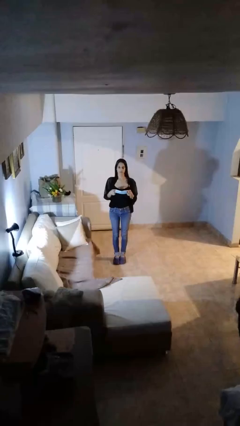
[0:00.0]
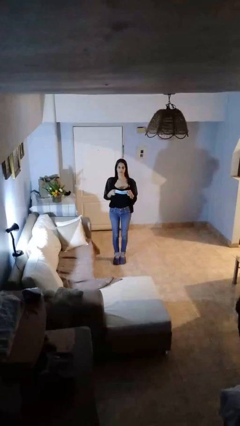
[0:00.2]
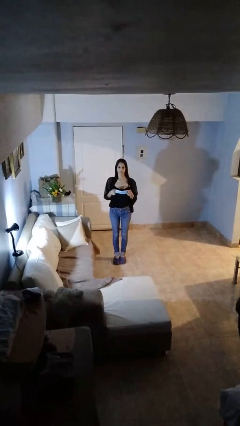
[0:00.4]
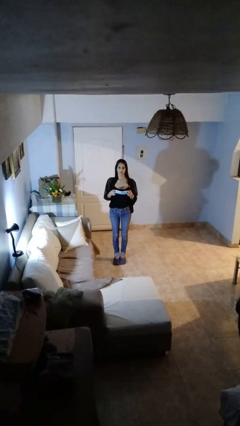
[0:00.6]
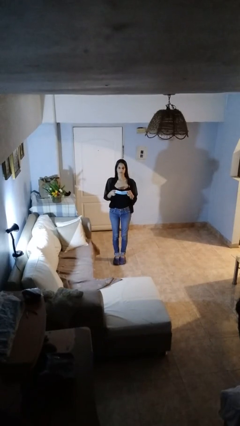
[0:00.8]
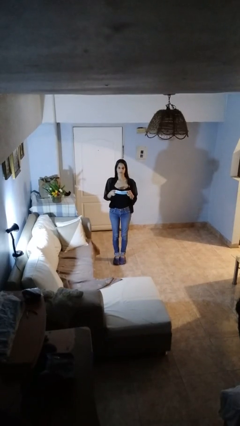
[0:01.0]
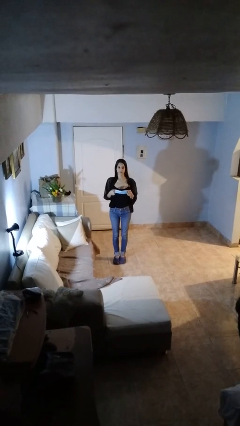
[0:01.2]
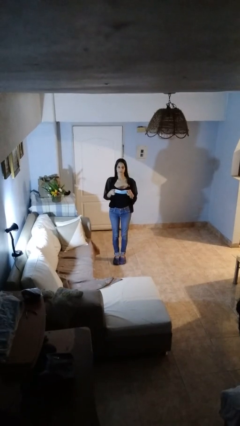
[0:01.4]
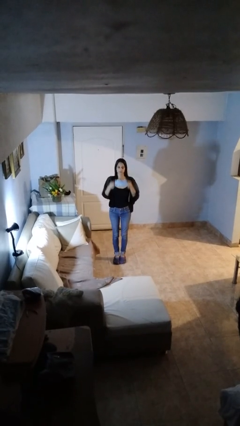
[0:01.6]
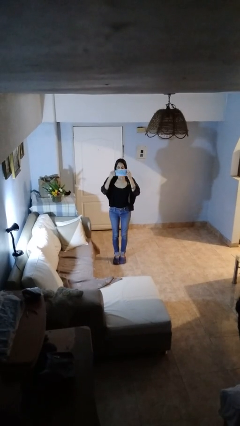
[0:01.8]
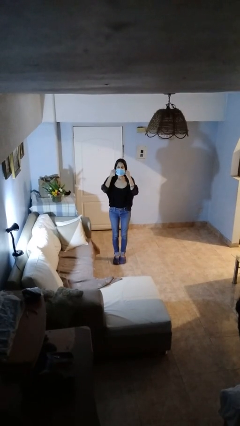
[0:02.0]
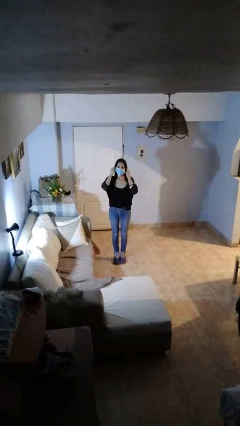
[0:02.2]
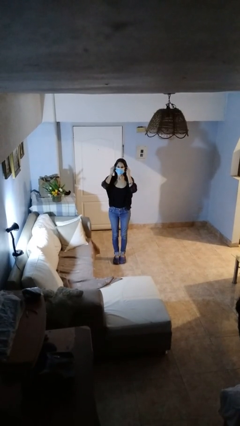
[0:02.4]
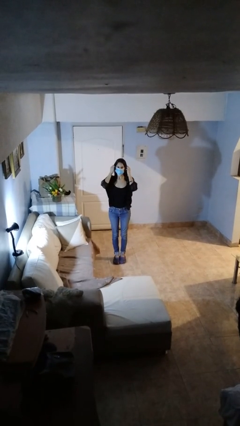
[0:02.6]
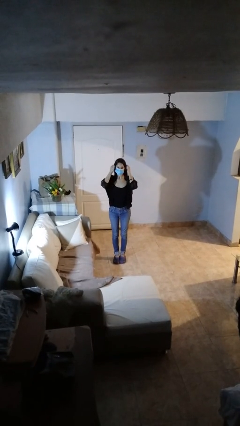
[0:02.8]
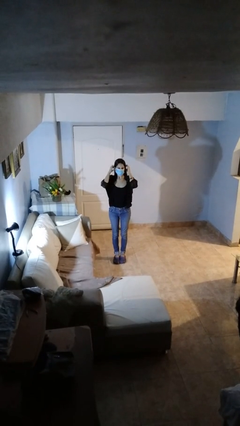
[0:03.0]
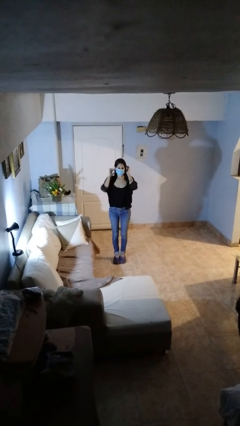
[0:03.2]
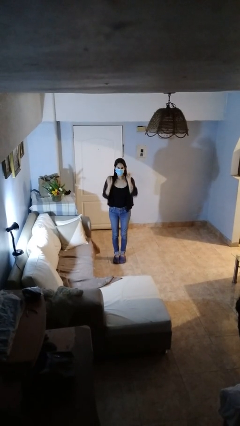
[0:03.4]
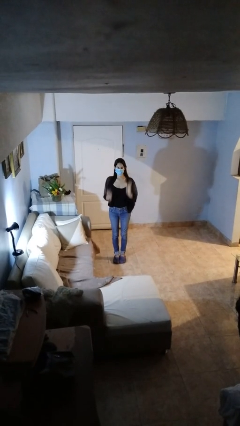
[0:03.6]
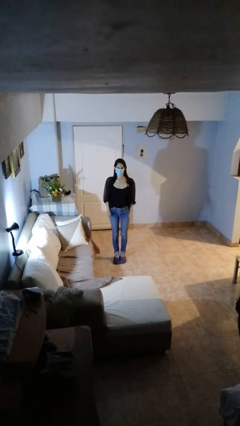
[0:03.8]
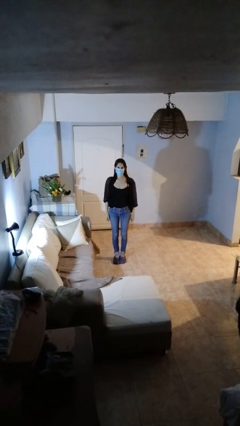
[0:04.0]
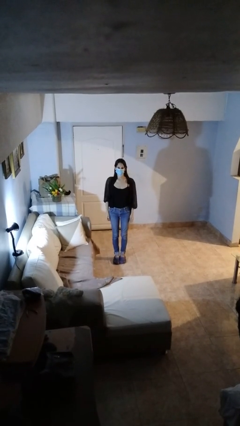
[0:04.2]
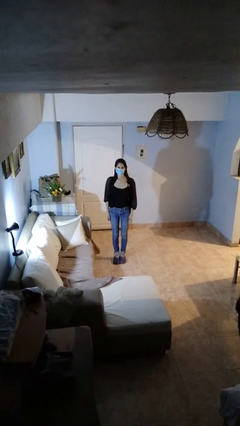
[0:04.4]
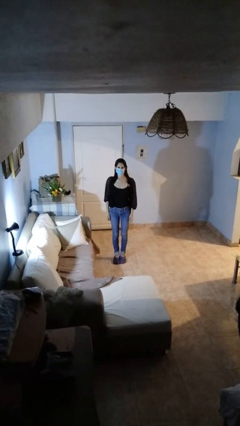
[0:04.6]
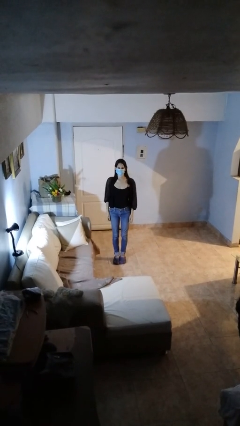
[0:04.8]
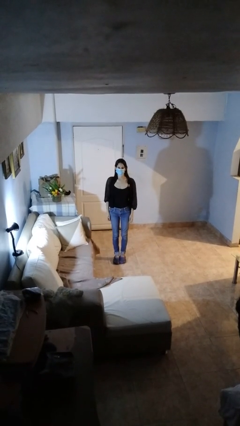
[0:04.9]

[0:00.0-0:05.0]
person puts on facemask

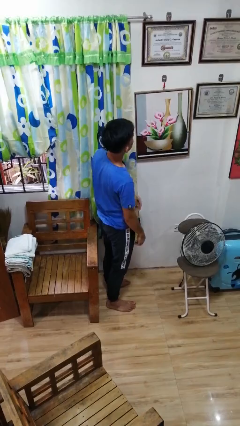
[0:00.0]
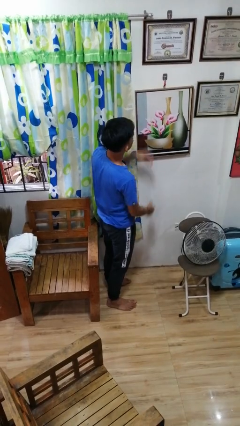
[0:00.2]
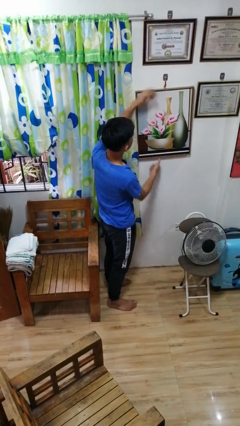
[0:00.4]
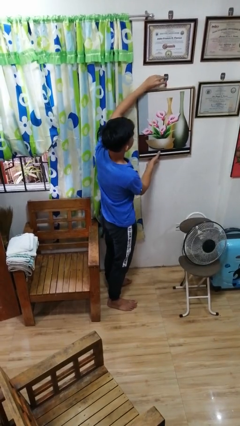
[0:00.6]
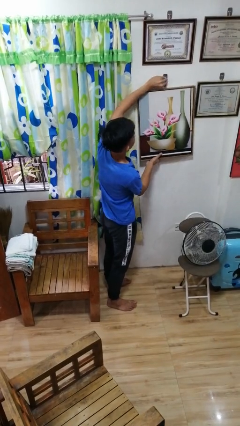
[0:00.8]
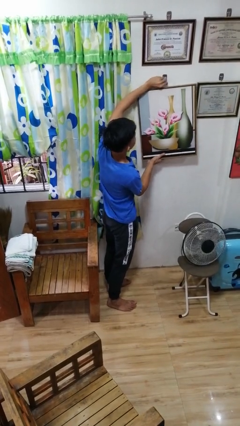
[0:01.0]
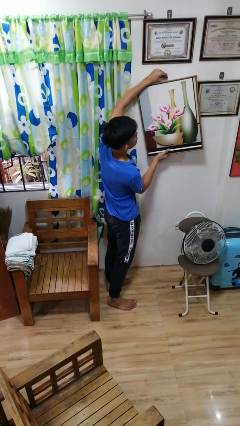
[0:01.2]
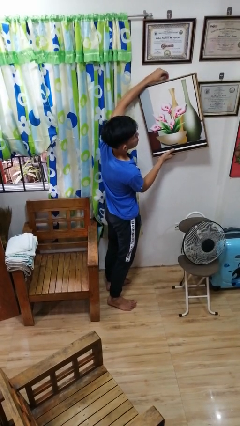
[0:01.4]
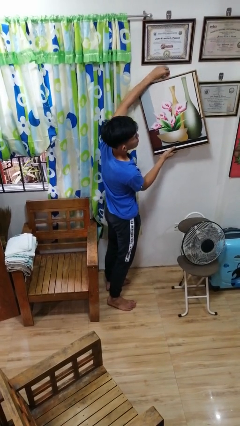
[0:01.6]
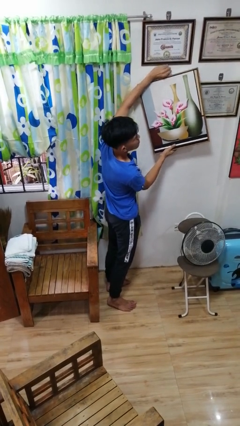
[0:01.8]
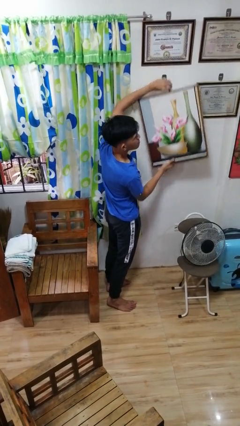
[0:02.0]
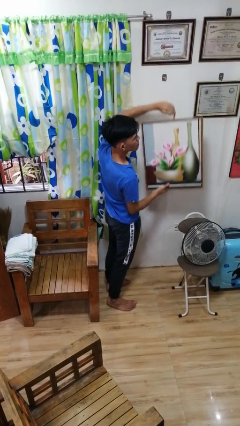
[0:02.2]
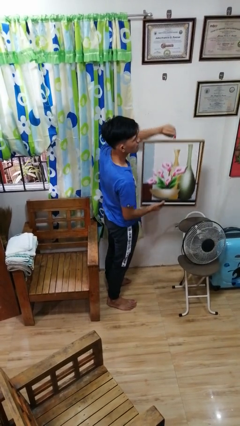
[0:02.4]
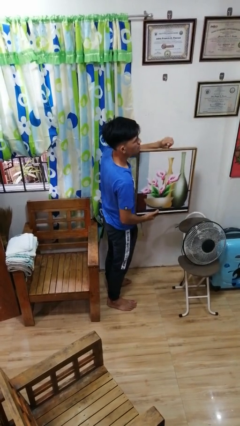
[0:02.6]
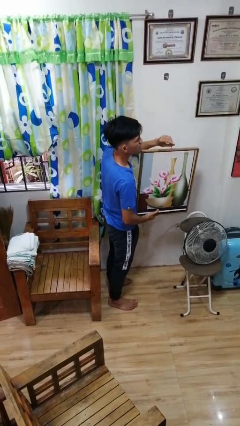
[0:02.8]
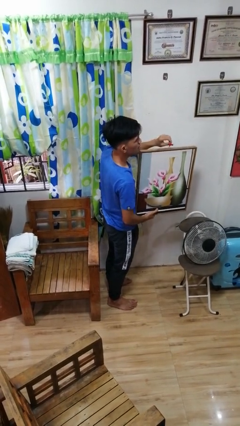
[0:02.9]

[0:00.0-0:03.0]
person takes down picture frame

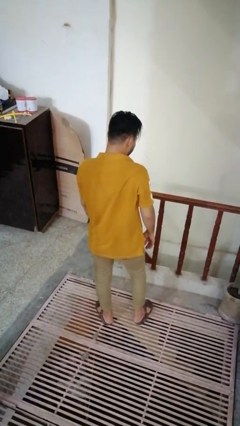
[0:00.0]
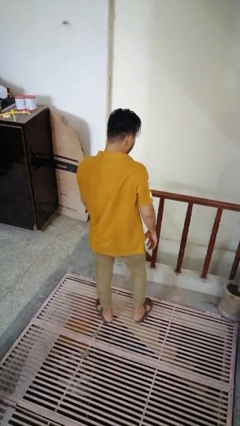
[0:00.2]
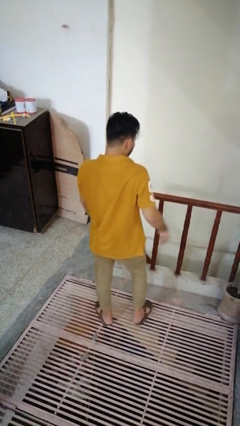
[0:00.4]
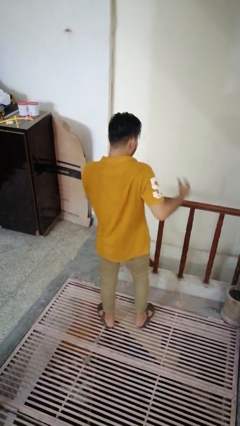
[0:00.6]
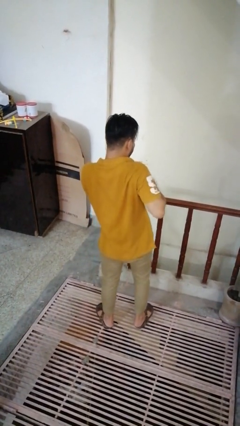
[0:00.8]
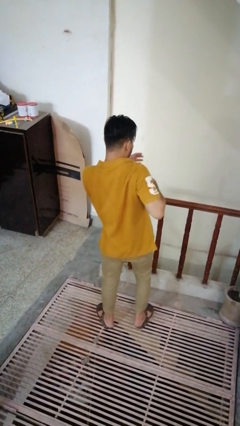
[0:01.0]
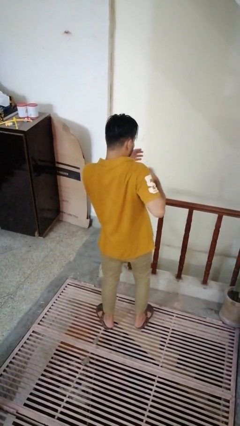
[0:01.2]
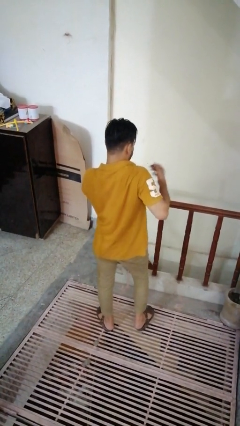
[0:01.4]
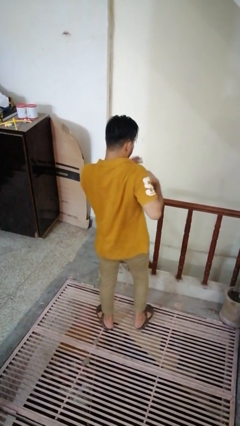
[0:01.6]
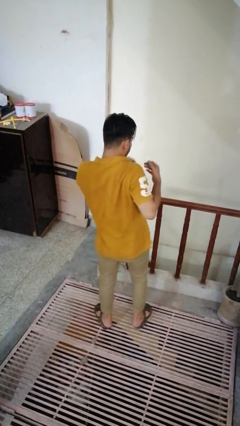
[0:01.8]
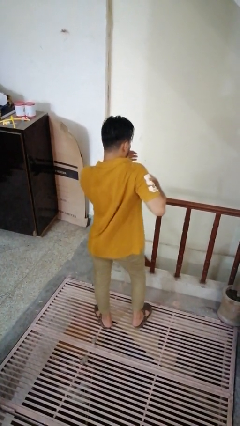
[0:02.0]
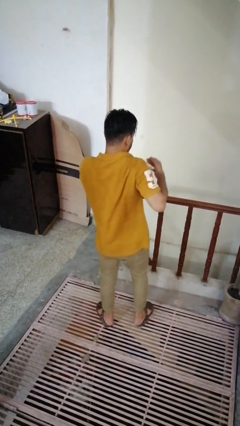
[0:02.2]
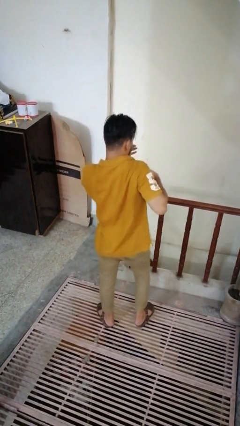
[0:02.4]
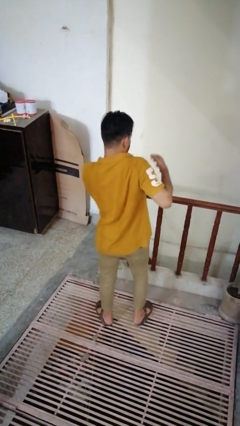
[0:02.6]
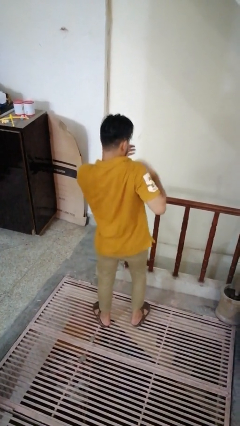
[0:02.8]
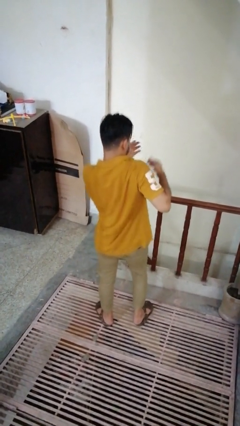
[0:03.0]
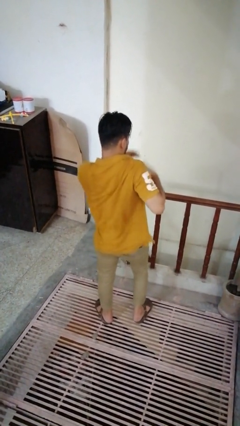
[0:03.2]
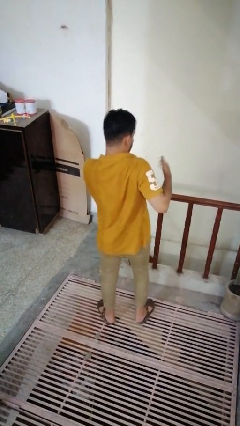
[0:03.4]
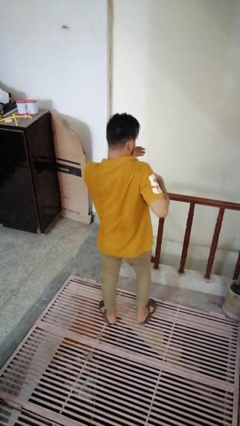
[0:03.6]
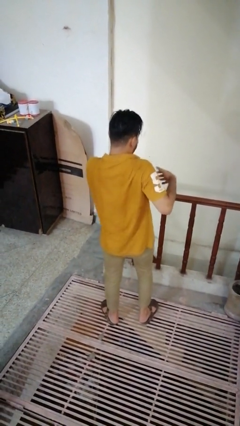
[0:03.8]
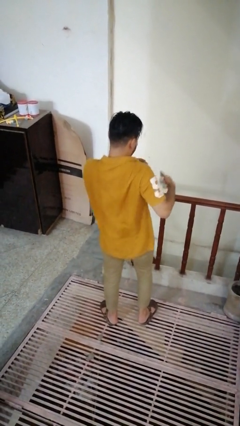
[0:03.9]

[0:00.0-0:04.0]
person drums on chest

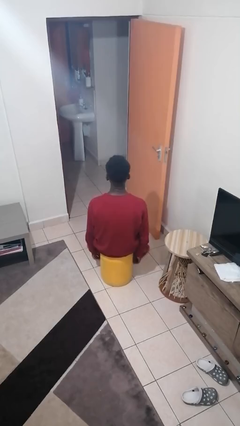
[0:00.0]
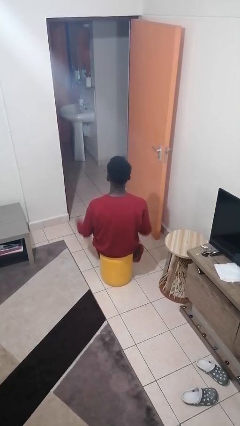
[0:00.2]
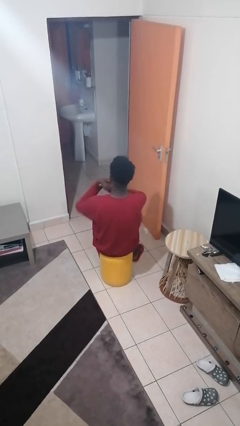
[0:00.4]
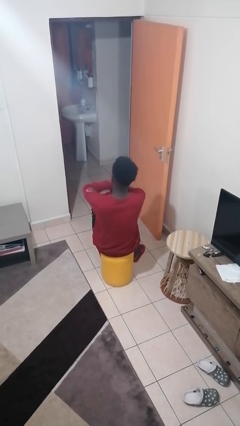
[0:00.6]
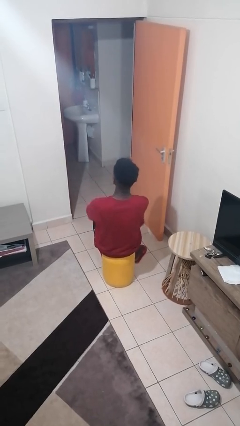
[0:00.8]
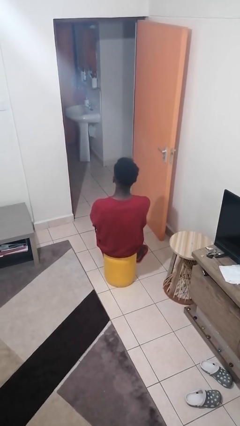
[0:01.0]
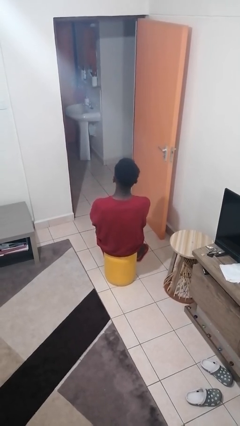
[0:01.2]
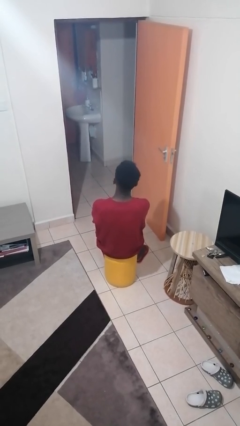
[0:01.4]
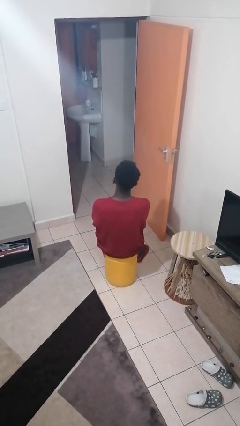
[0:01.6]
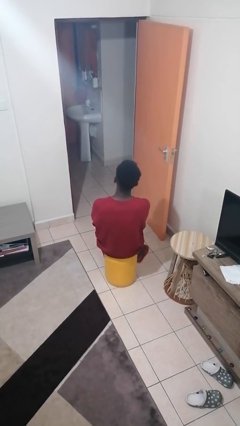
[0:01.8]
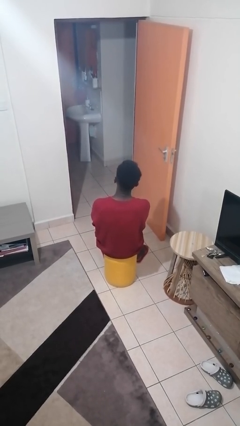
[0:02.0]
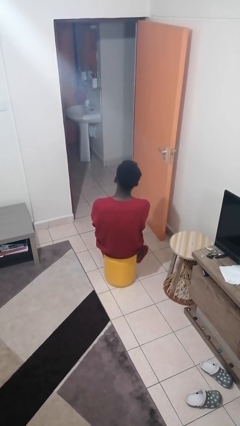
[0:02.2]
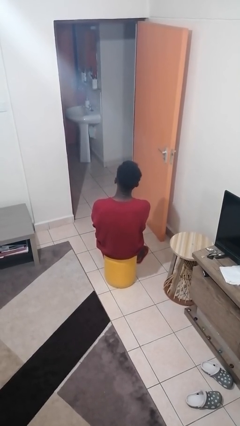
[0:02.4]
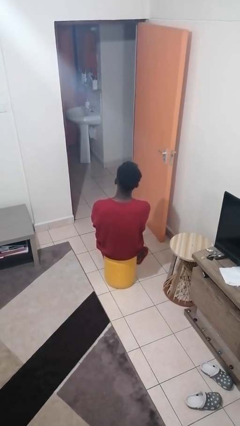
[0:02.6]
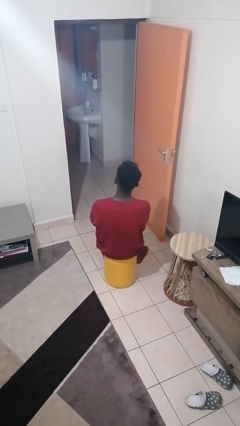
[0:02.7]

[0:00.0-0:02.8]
person crosses arms

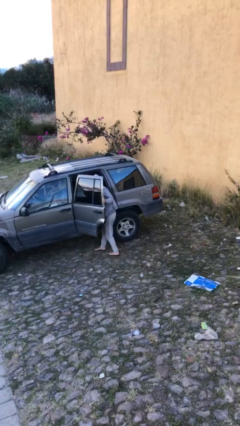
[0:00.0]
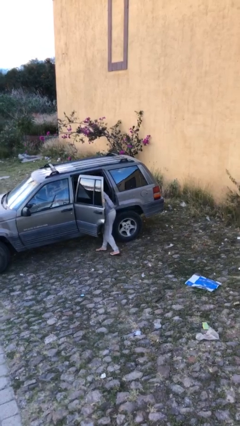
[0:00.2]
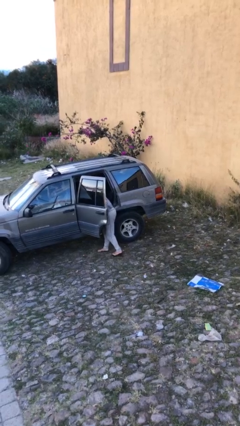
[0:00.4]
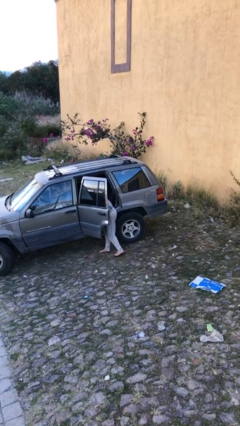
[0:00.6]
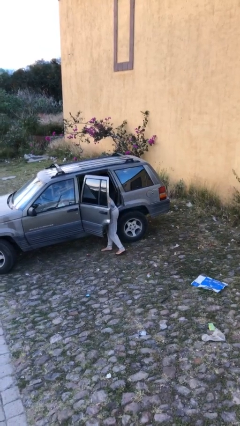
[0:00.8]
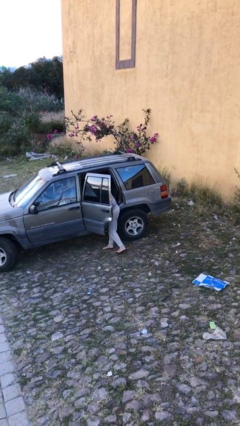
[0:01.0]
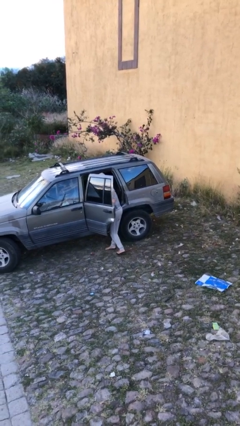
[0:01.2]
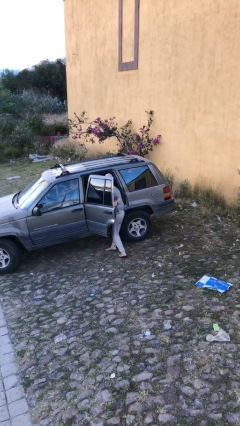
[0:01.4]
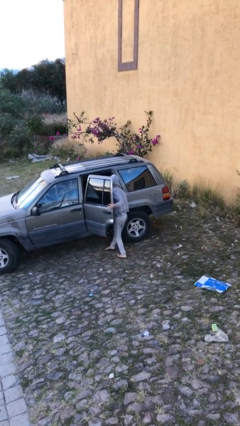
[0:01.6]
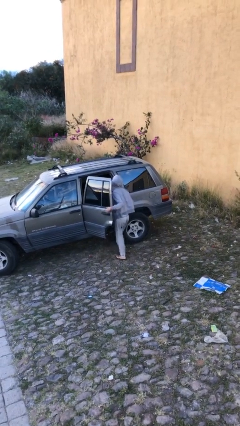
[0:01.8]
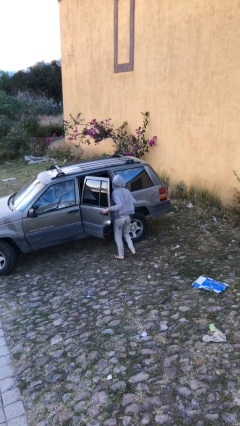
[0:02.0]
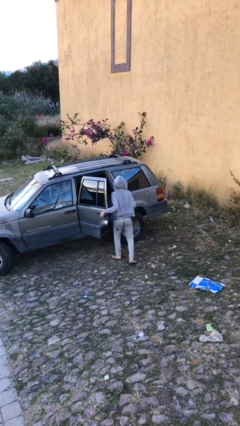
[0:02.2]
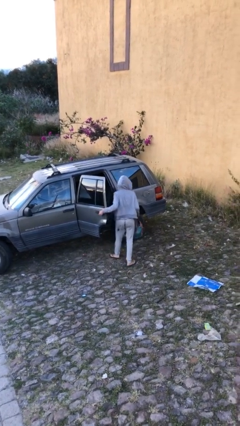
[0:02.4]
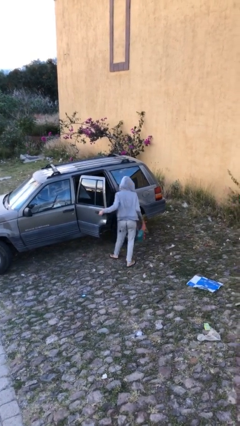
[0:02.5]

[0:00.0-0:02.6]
person unloads car
